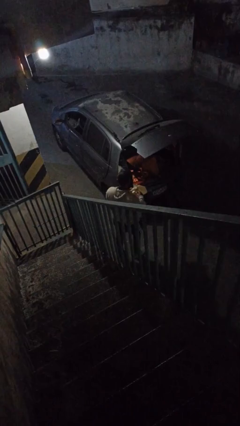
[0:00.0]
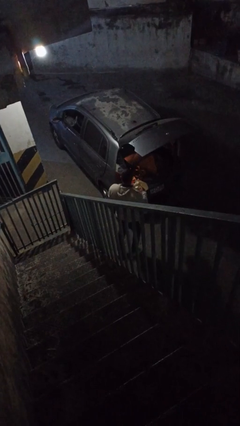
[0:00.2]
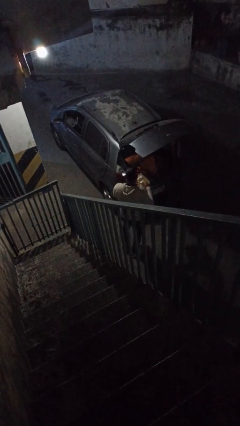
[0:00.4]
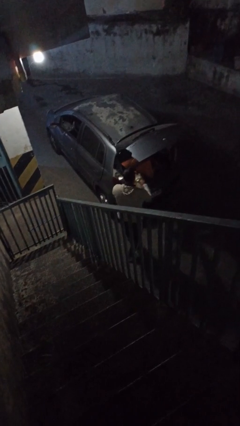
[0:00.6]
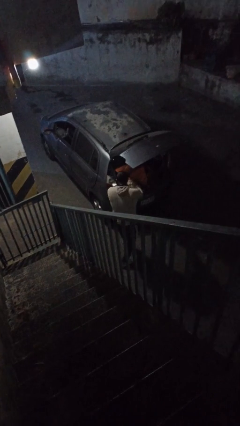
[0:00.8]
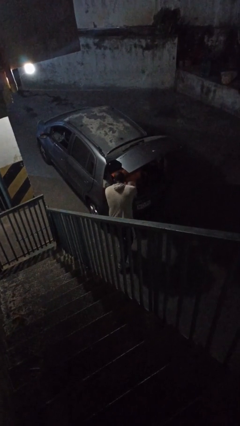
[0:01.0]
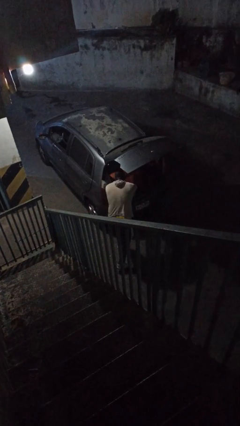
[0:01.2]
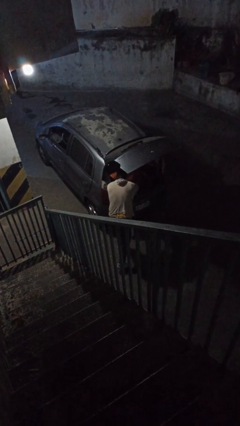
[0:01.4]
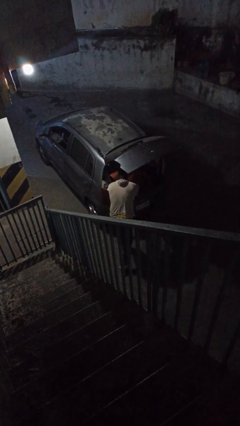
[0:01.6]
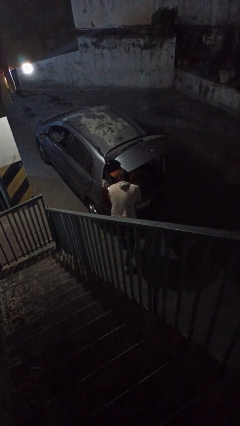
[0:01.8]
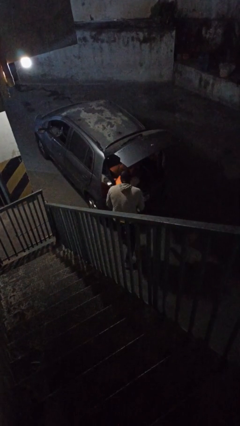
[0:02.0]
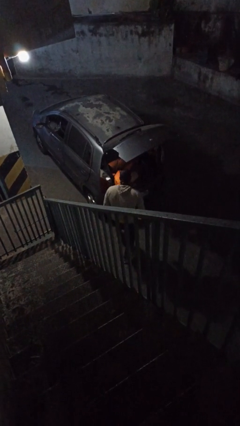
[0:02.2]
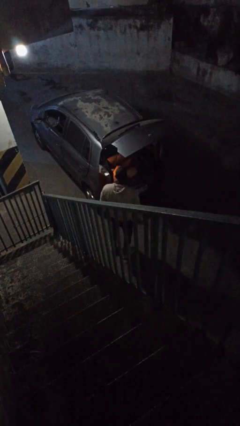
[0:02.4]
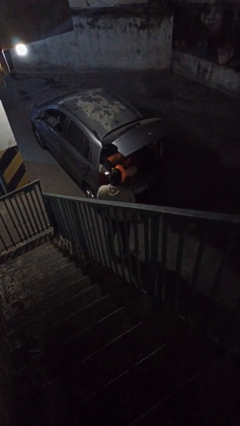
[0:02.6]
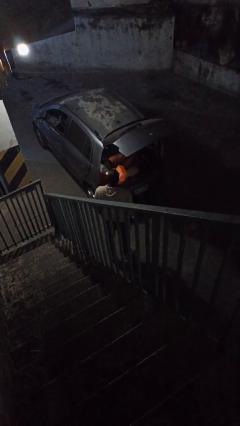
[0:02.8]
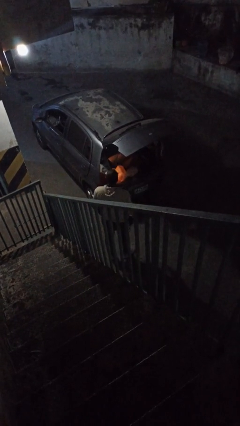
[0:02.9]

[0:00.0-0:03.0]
person loads car

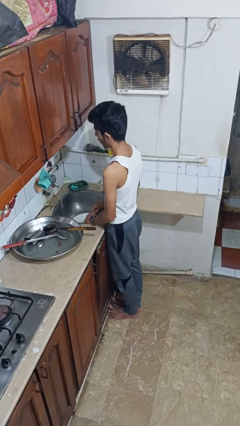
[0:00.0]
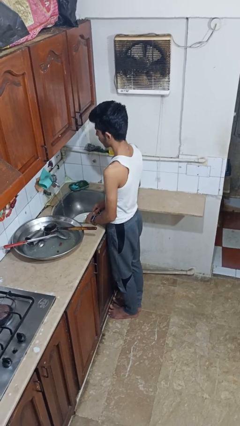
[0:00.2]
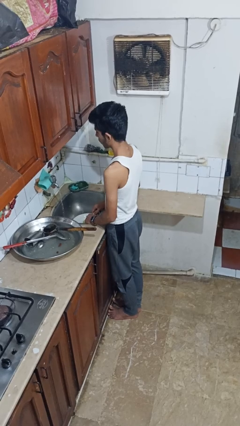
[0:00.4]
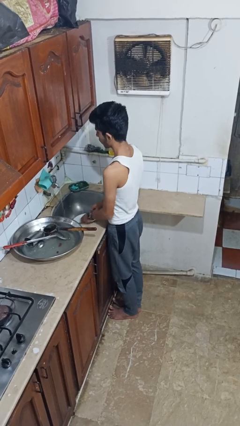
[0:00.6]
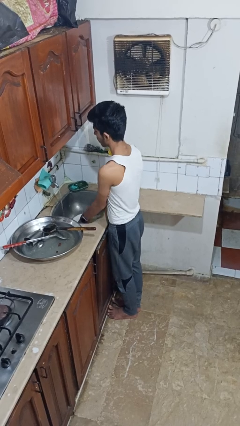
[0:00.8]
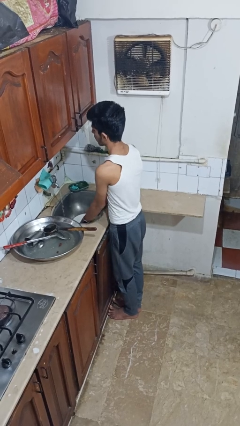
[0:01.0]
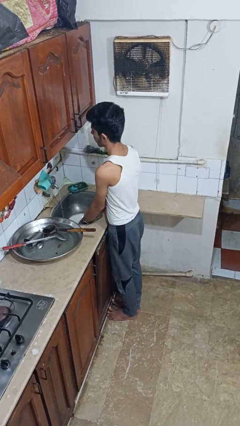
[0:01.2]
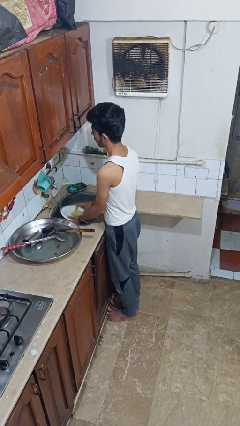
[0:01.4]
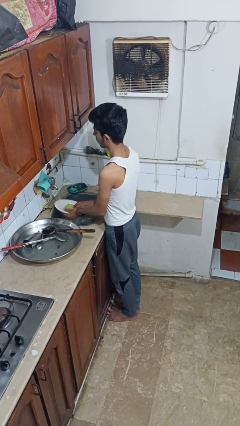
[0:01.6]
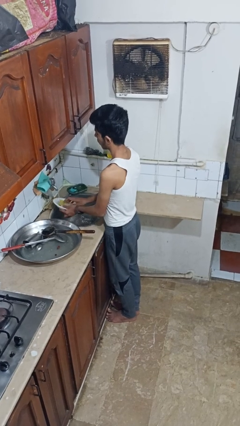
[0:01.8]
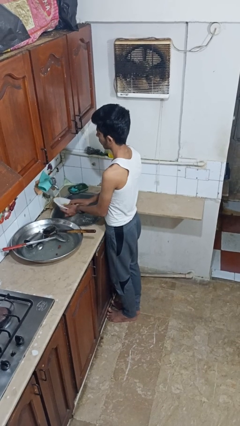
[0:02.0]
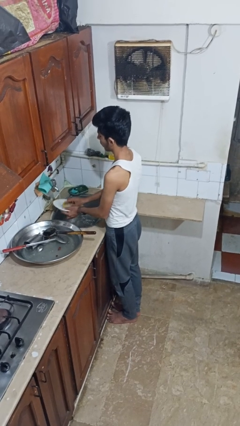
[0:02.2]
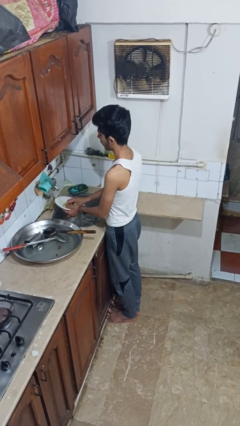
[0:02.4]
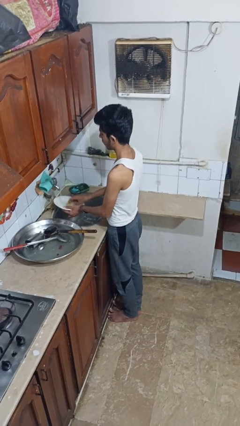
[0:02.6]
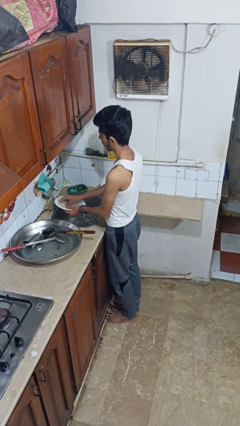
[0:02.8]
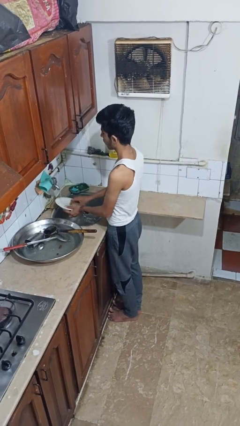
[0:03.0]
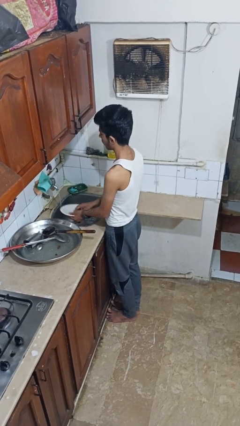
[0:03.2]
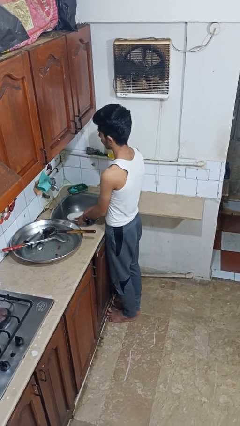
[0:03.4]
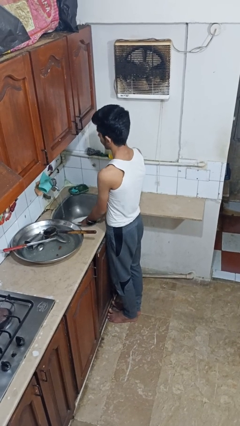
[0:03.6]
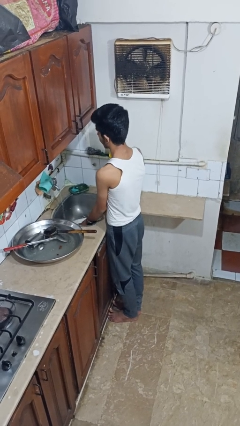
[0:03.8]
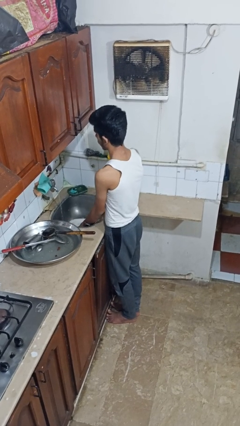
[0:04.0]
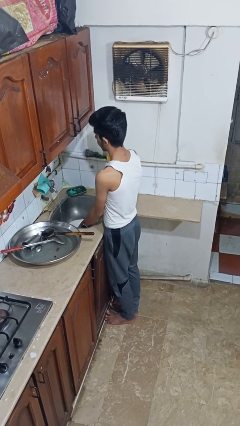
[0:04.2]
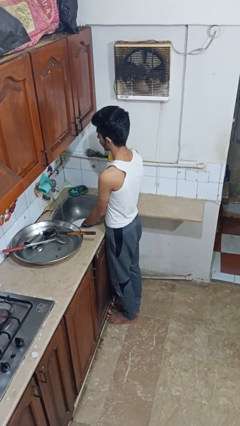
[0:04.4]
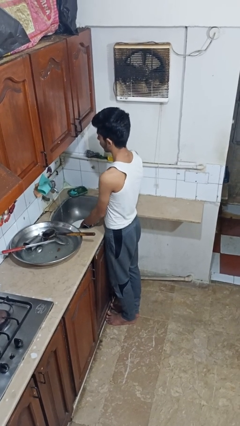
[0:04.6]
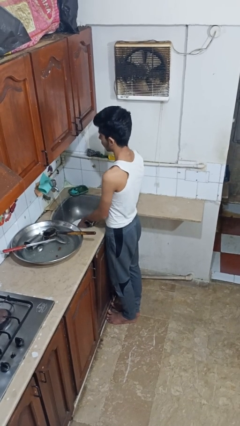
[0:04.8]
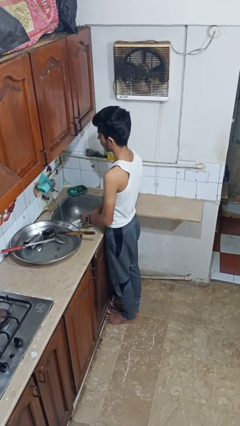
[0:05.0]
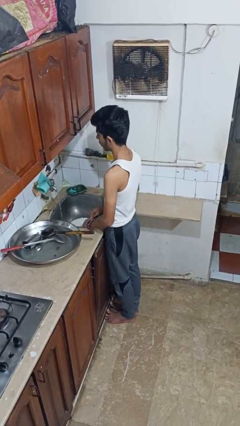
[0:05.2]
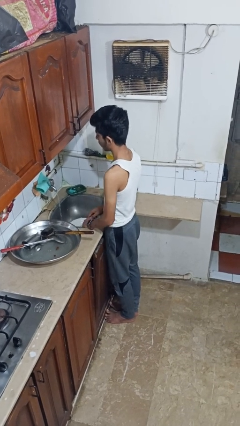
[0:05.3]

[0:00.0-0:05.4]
person washes dish

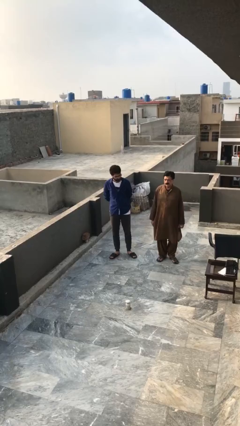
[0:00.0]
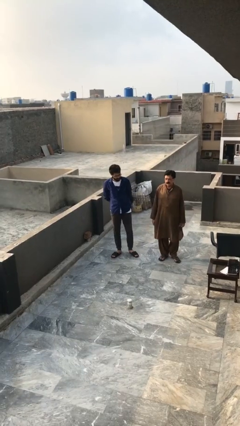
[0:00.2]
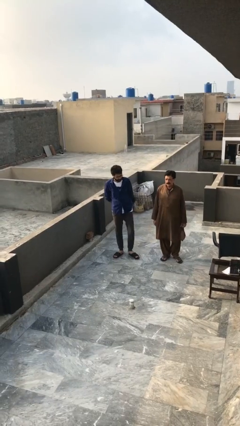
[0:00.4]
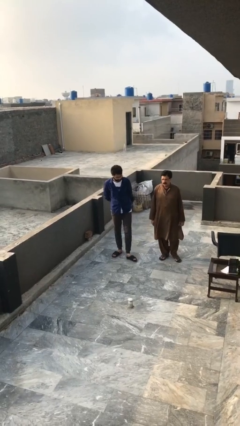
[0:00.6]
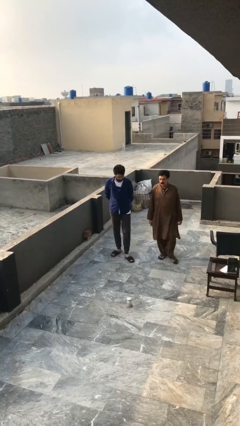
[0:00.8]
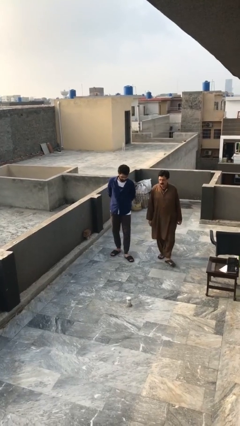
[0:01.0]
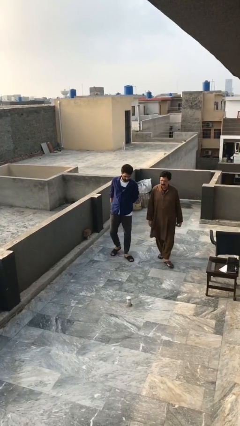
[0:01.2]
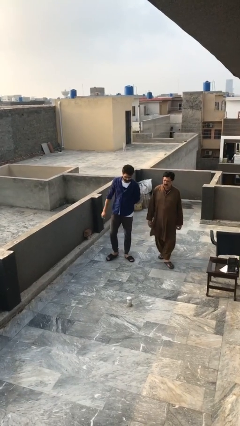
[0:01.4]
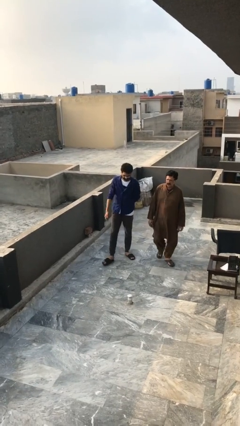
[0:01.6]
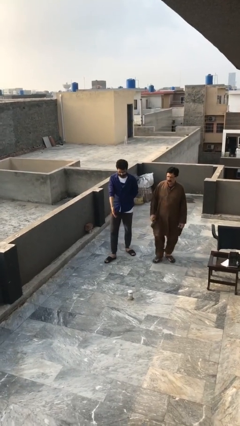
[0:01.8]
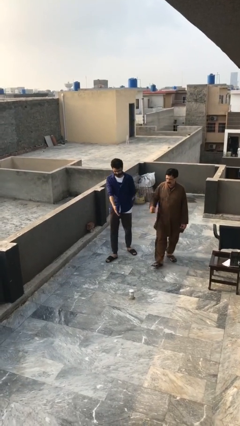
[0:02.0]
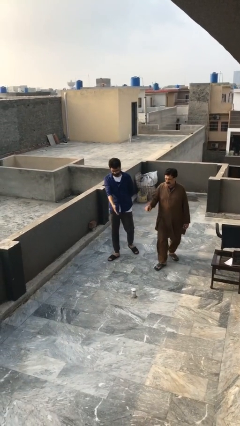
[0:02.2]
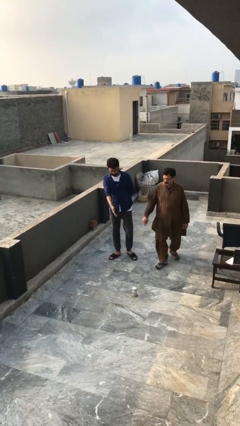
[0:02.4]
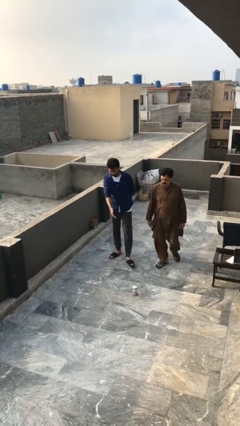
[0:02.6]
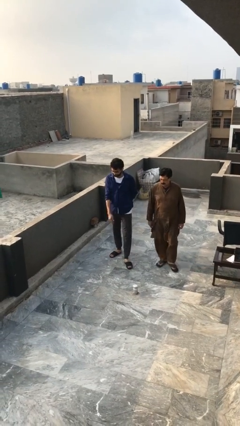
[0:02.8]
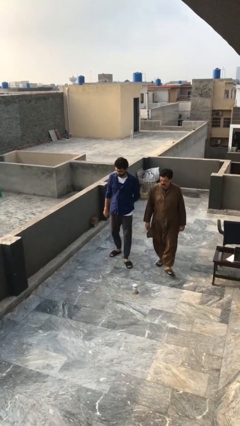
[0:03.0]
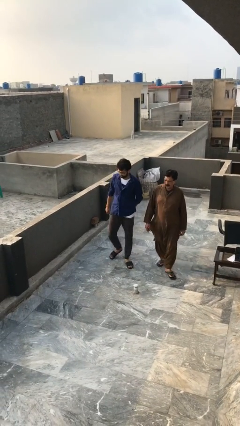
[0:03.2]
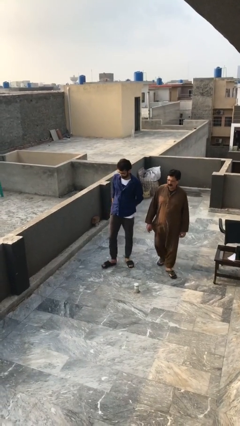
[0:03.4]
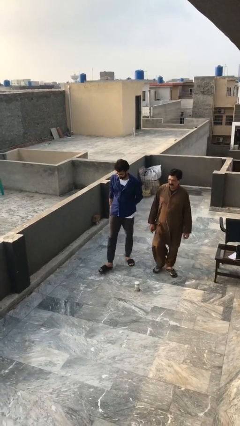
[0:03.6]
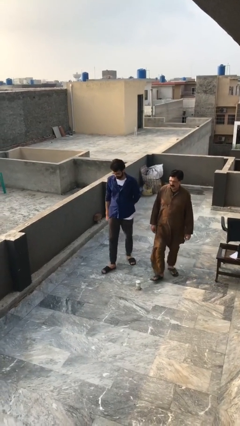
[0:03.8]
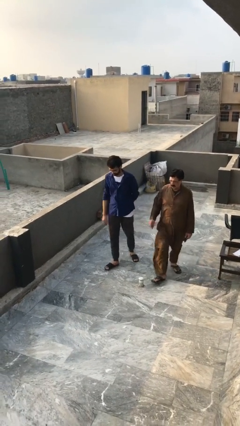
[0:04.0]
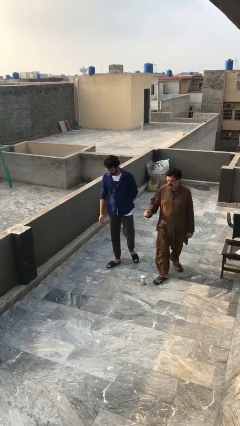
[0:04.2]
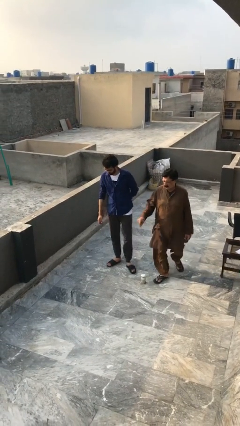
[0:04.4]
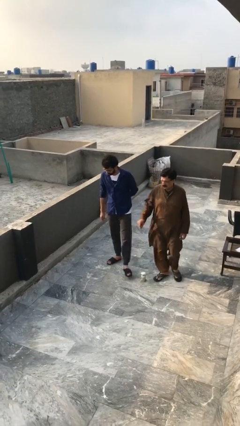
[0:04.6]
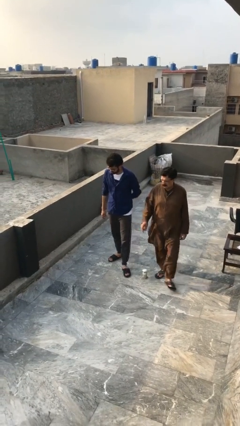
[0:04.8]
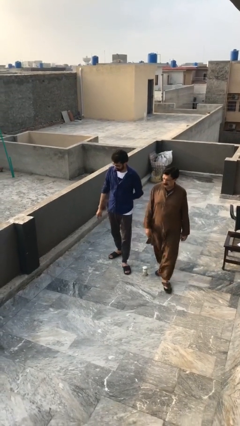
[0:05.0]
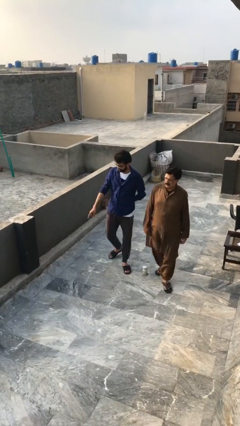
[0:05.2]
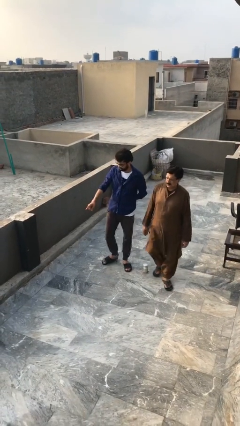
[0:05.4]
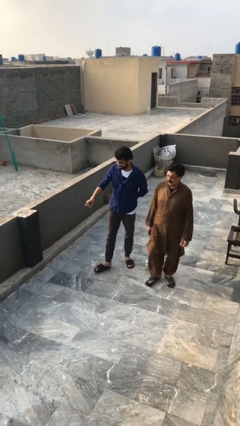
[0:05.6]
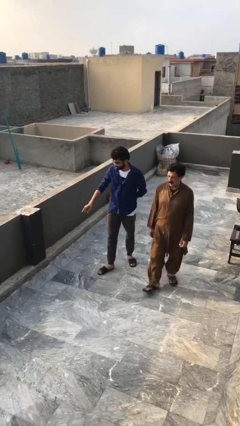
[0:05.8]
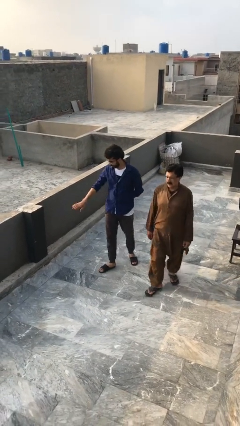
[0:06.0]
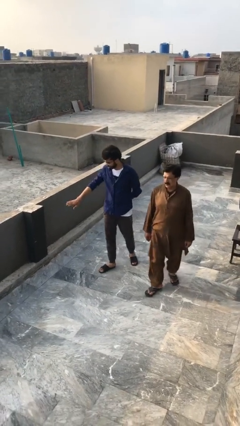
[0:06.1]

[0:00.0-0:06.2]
person talks to person

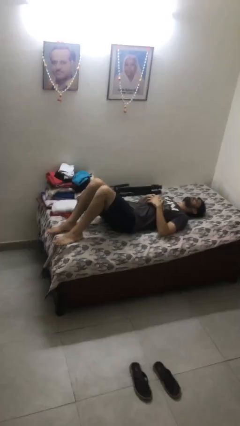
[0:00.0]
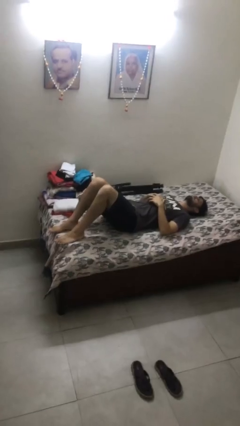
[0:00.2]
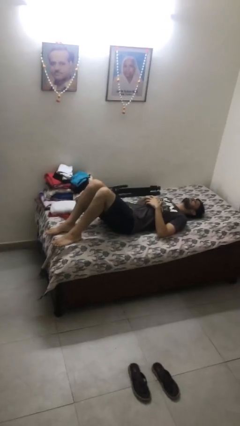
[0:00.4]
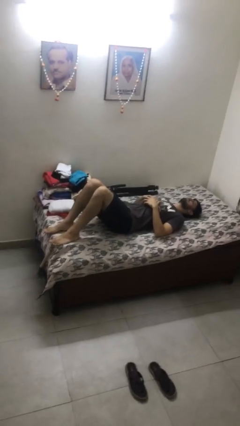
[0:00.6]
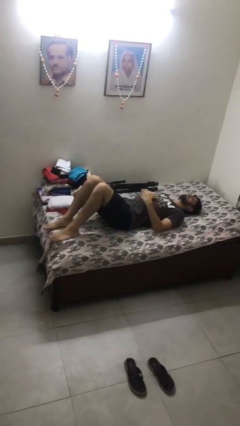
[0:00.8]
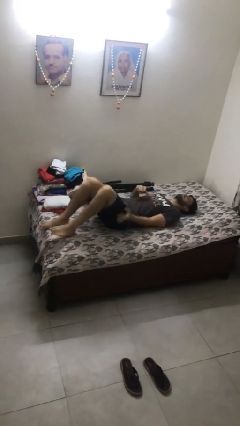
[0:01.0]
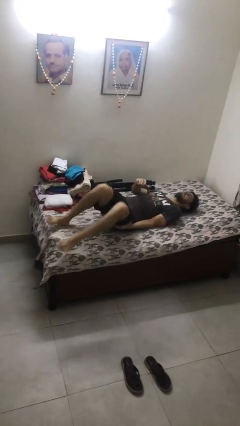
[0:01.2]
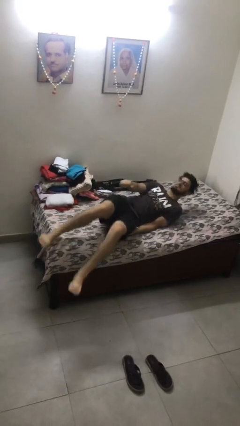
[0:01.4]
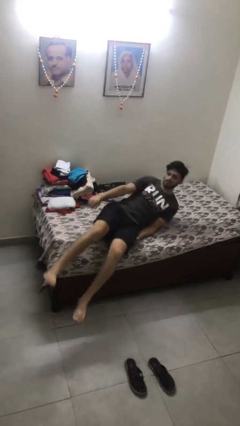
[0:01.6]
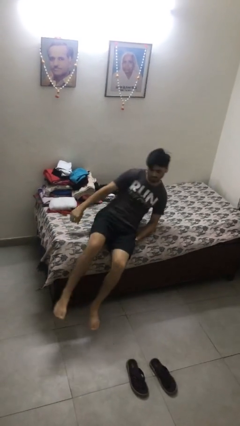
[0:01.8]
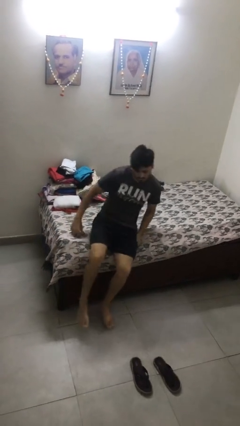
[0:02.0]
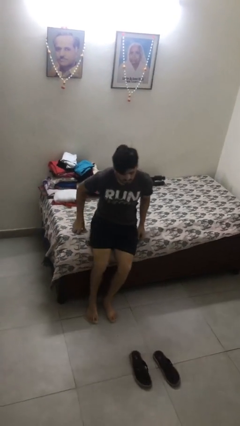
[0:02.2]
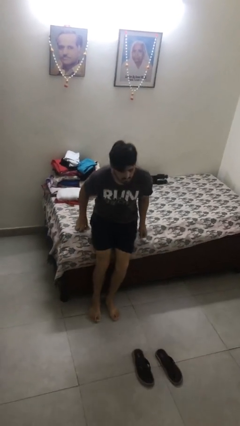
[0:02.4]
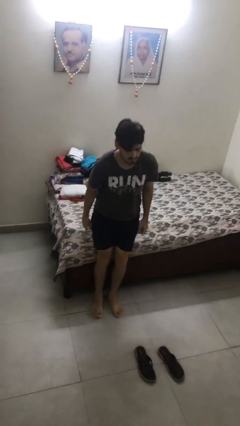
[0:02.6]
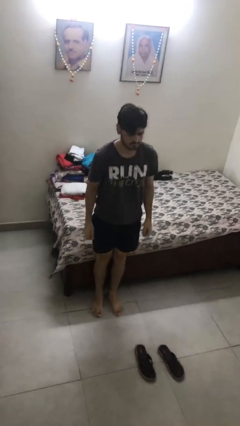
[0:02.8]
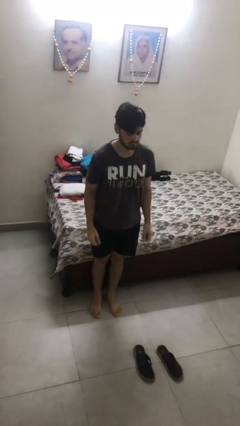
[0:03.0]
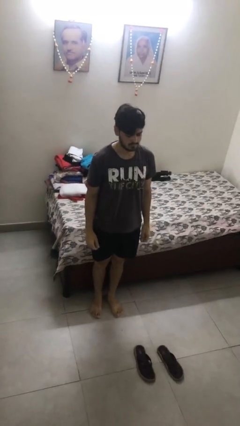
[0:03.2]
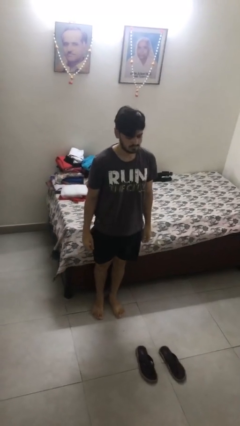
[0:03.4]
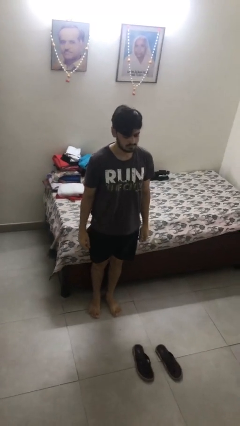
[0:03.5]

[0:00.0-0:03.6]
person stands up
